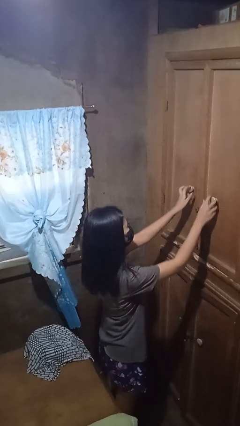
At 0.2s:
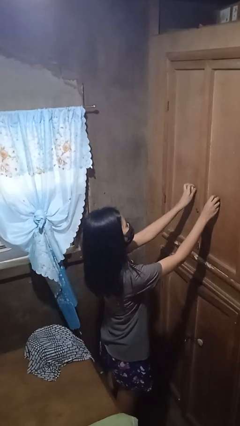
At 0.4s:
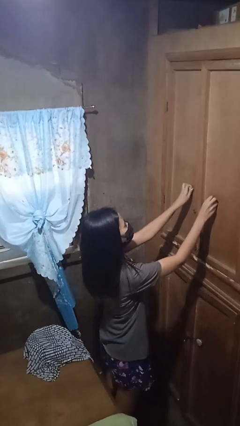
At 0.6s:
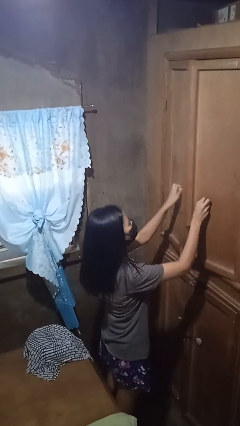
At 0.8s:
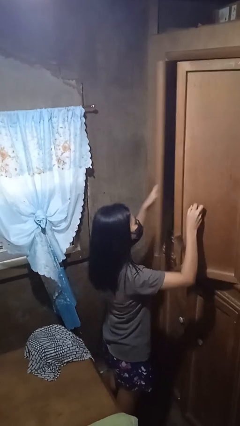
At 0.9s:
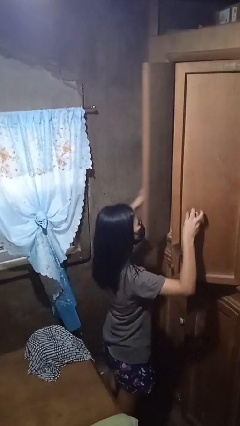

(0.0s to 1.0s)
person opens closet door

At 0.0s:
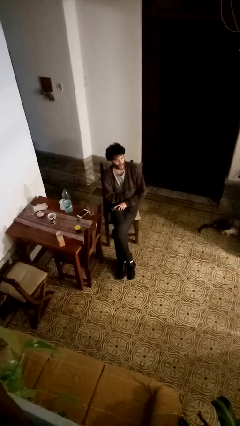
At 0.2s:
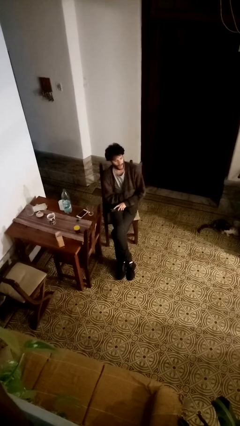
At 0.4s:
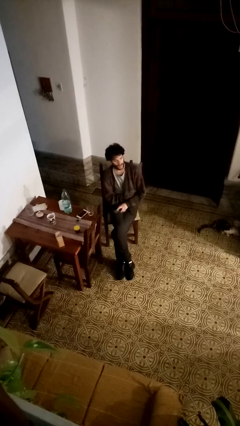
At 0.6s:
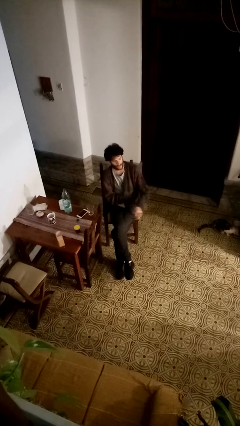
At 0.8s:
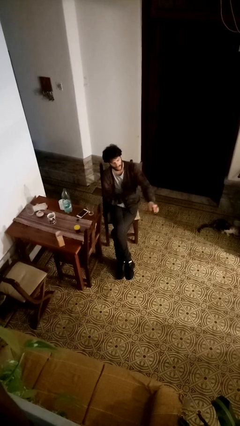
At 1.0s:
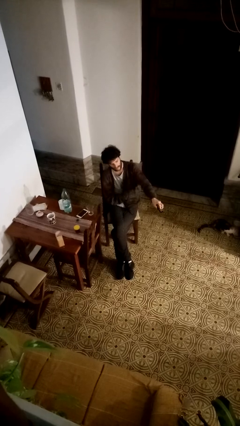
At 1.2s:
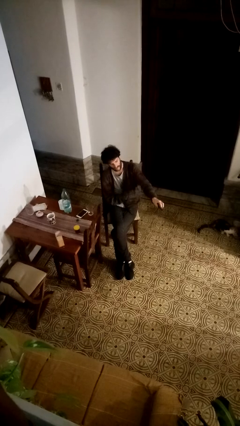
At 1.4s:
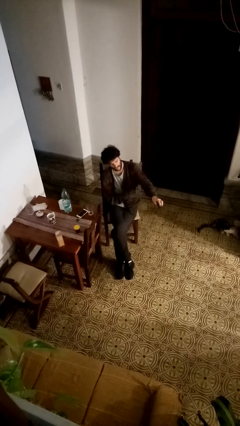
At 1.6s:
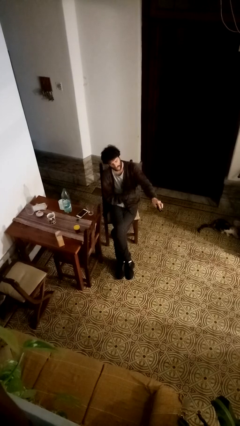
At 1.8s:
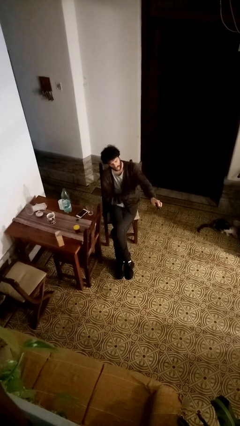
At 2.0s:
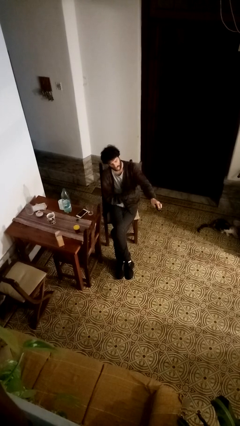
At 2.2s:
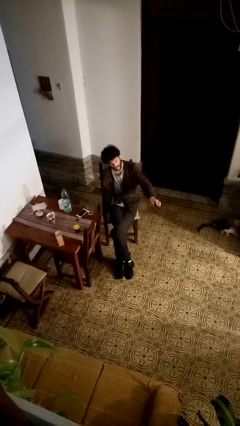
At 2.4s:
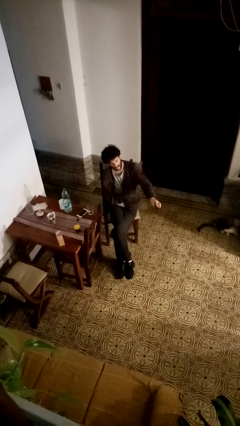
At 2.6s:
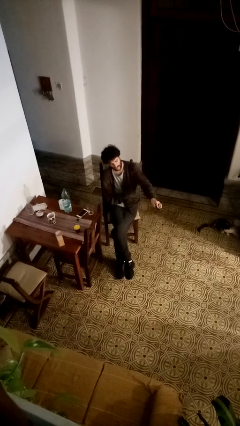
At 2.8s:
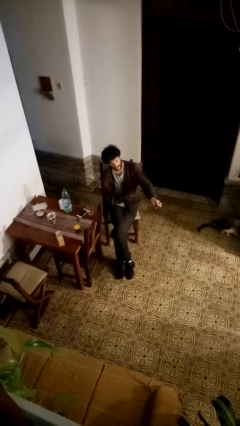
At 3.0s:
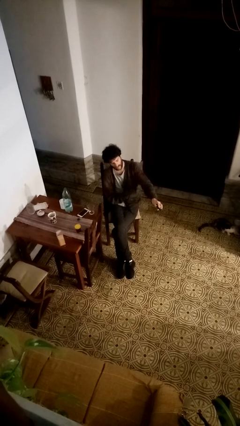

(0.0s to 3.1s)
person uses television remote

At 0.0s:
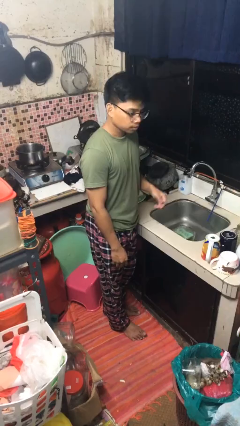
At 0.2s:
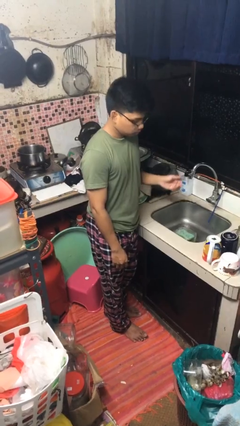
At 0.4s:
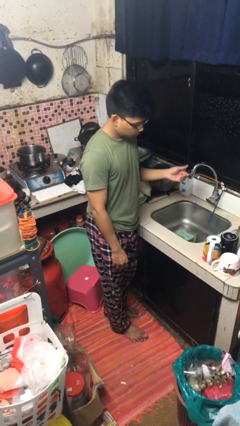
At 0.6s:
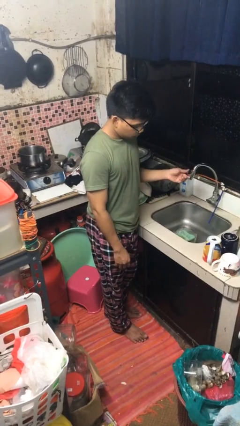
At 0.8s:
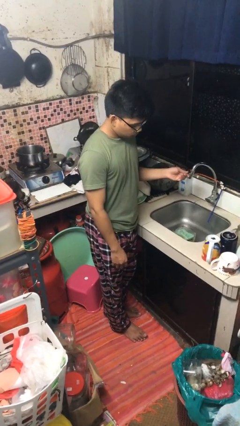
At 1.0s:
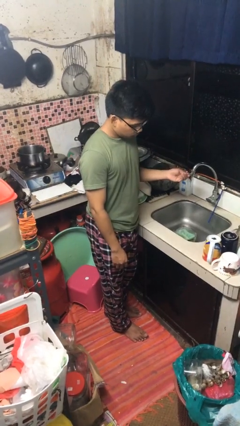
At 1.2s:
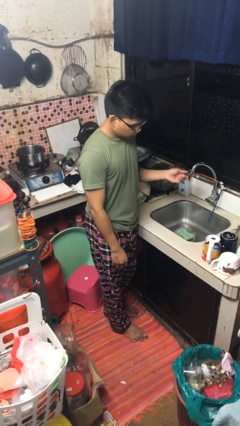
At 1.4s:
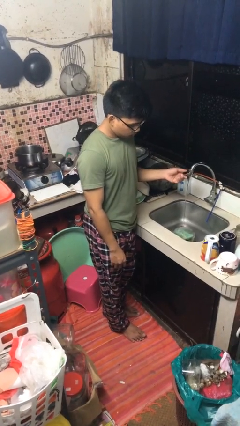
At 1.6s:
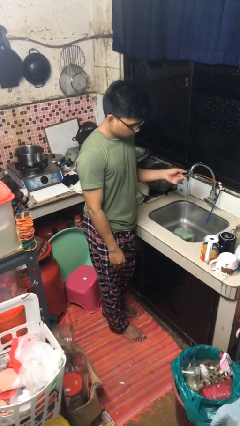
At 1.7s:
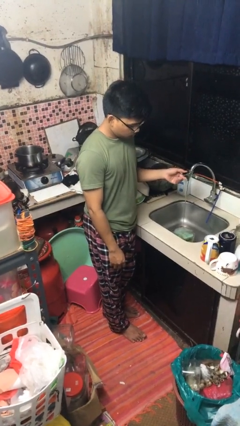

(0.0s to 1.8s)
person turns on faucet

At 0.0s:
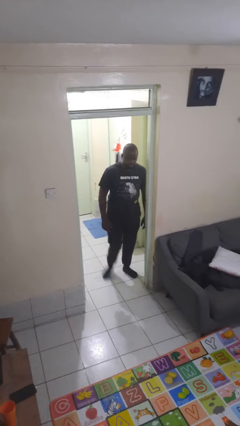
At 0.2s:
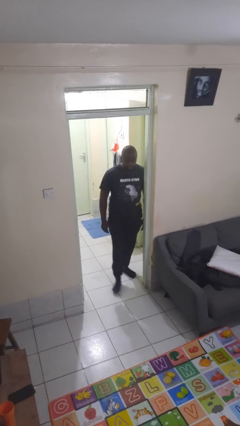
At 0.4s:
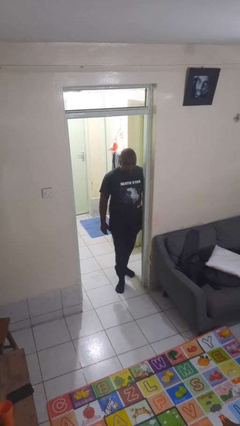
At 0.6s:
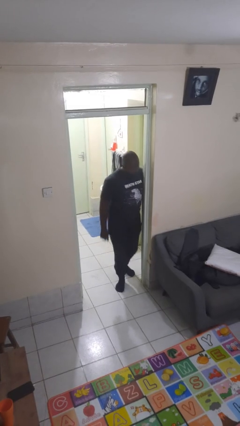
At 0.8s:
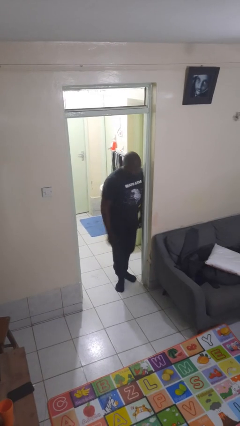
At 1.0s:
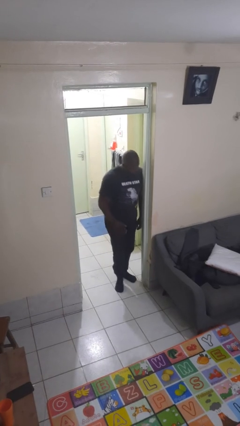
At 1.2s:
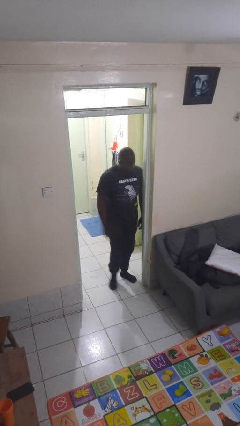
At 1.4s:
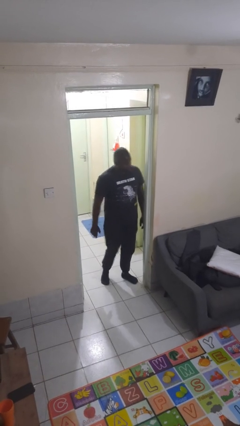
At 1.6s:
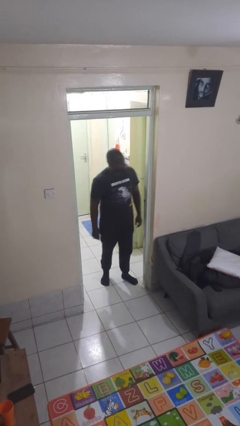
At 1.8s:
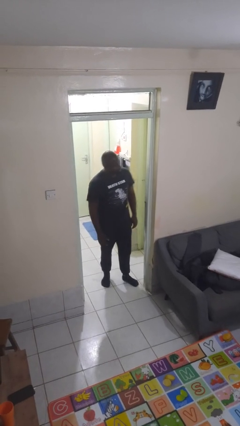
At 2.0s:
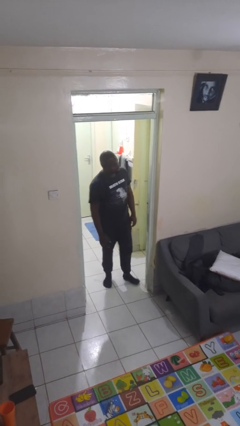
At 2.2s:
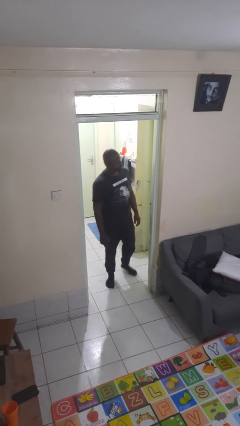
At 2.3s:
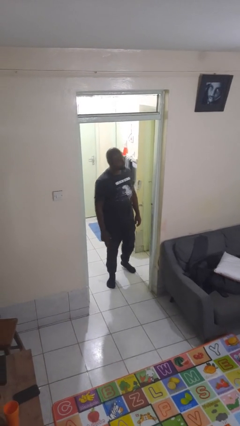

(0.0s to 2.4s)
person bumps into wall

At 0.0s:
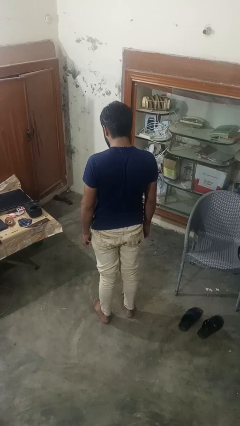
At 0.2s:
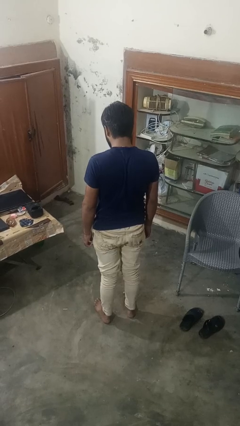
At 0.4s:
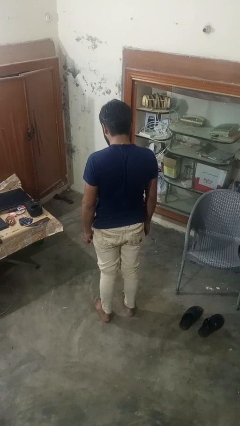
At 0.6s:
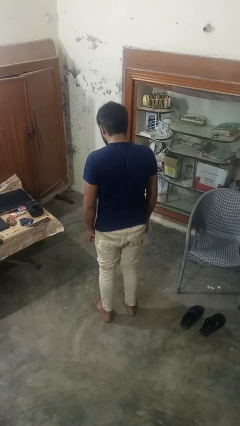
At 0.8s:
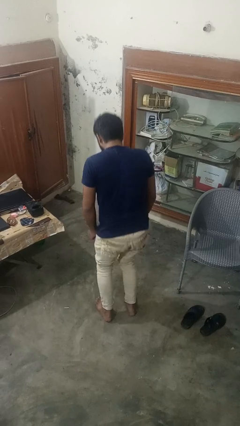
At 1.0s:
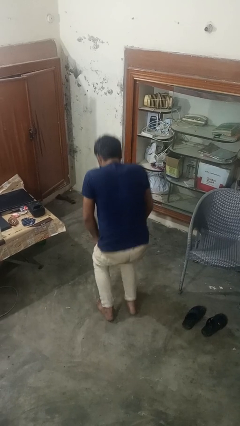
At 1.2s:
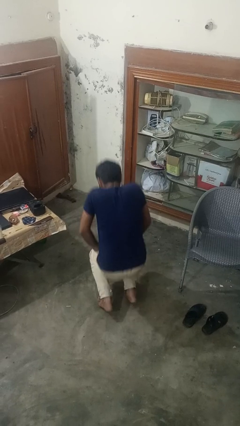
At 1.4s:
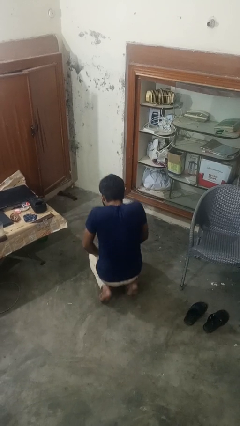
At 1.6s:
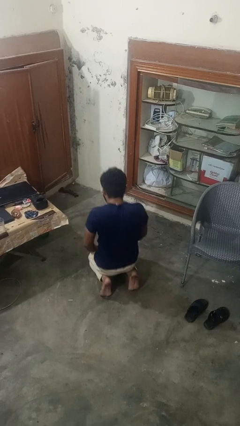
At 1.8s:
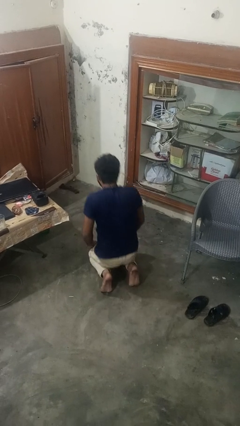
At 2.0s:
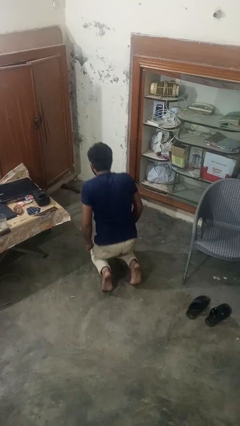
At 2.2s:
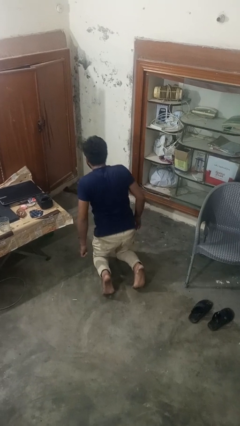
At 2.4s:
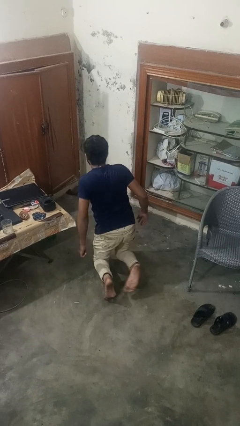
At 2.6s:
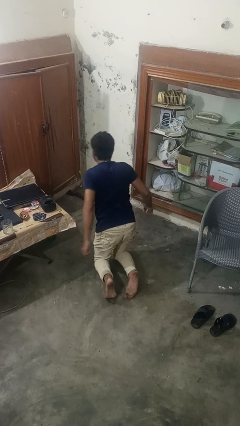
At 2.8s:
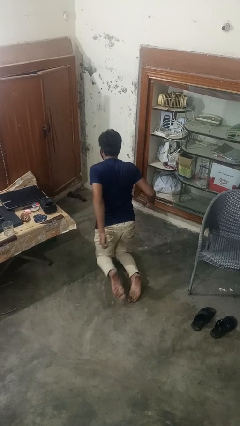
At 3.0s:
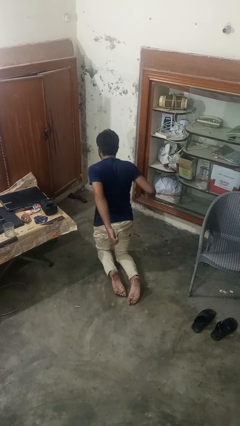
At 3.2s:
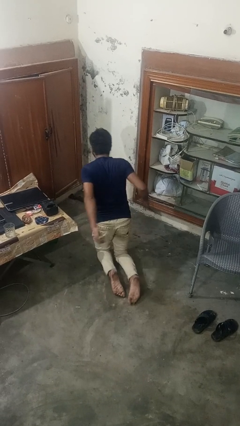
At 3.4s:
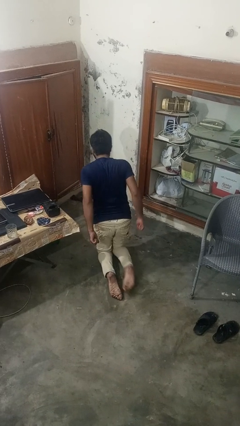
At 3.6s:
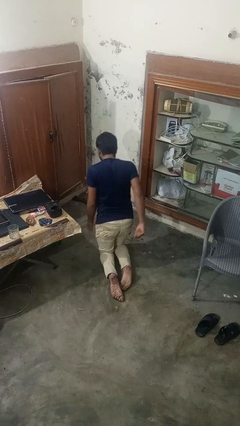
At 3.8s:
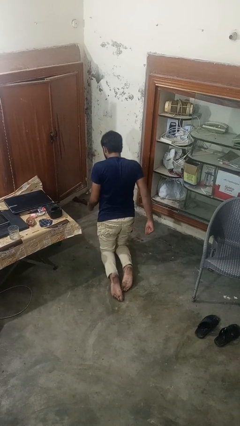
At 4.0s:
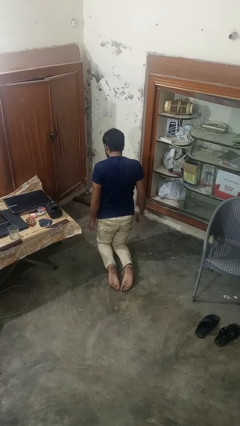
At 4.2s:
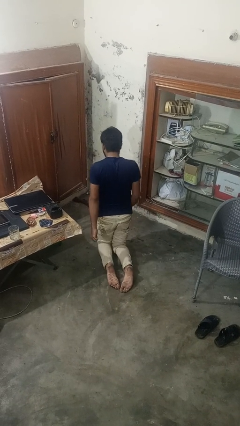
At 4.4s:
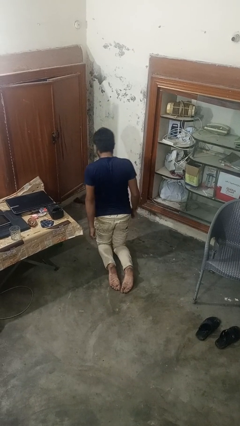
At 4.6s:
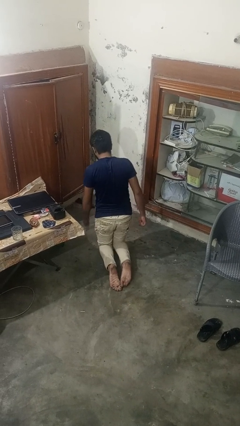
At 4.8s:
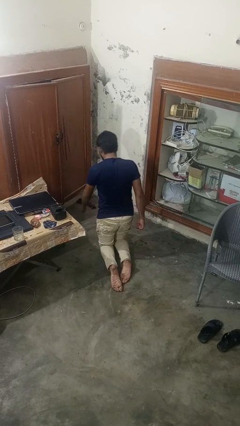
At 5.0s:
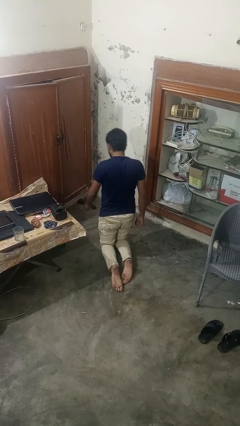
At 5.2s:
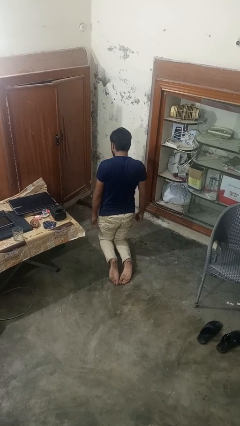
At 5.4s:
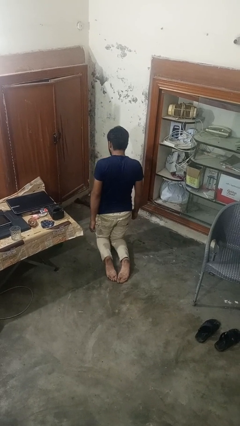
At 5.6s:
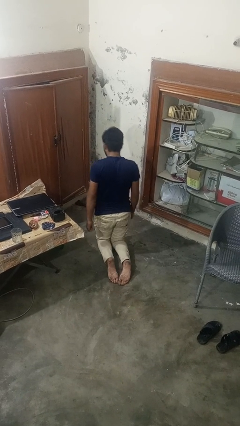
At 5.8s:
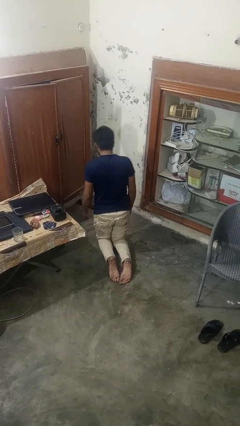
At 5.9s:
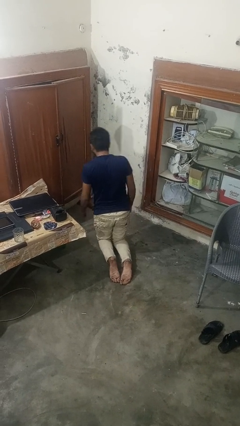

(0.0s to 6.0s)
person exercises with lunges

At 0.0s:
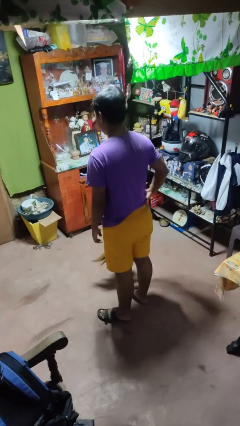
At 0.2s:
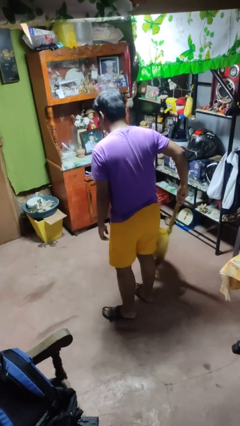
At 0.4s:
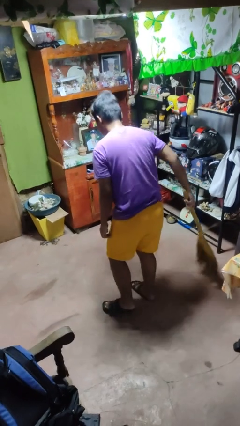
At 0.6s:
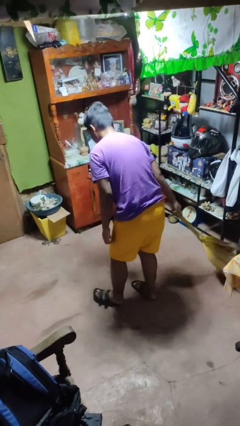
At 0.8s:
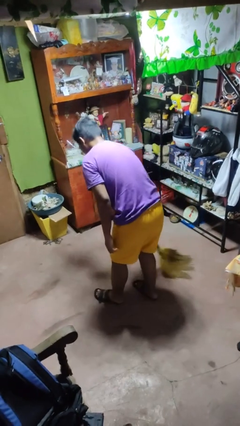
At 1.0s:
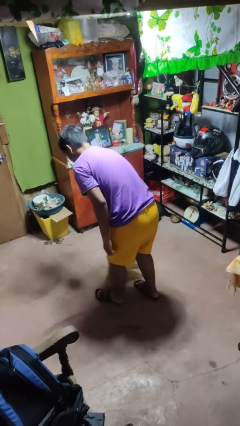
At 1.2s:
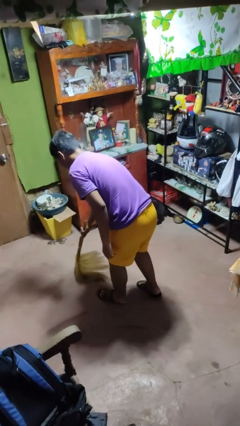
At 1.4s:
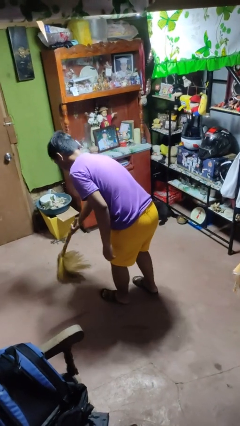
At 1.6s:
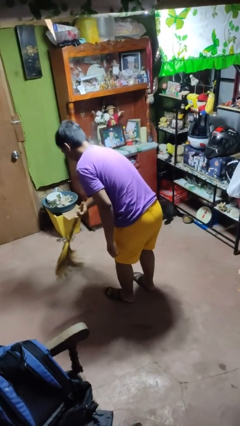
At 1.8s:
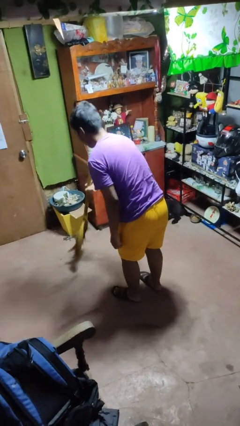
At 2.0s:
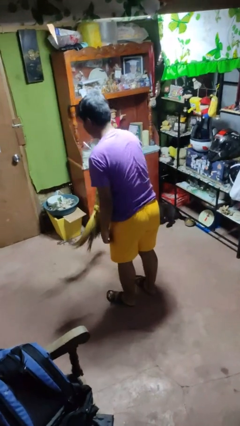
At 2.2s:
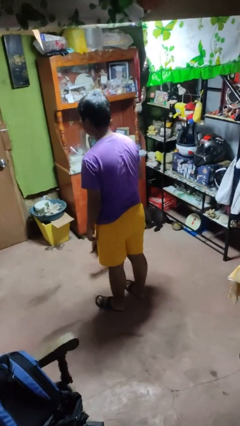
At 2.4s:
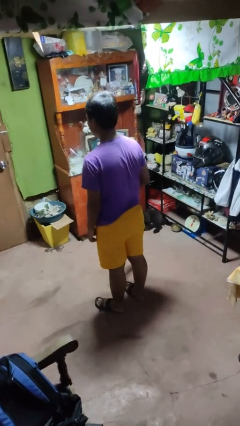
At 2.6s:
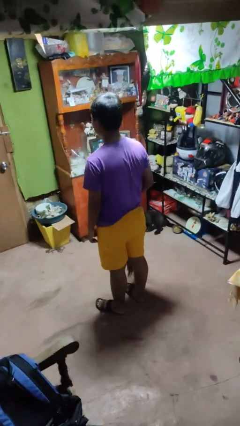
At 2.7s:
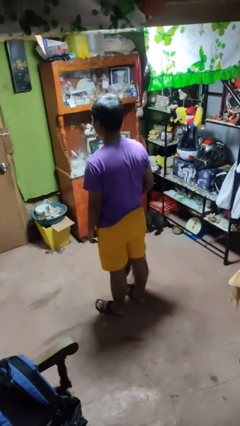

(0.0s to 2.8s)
person sweeps floor

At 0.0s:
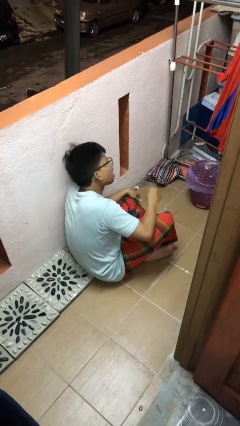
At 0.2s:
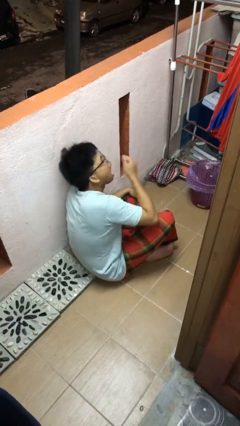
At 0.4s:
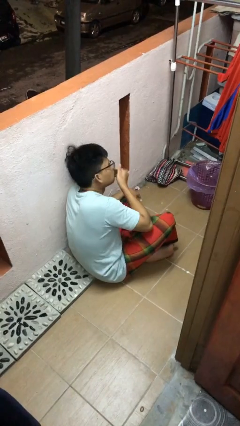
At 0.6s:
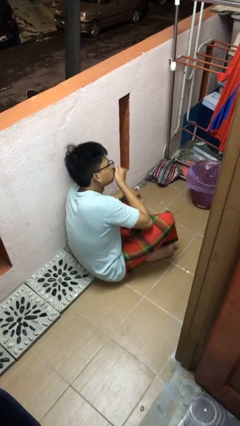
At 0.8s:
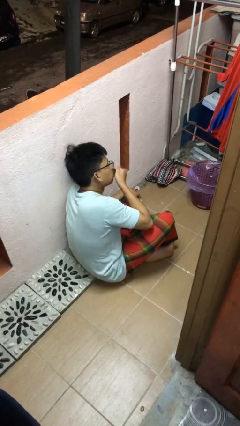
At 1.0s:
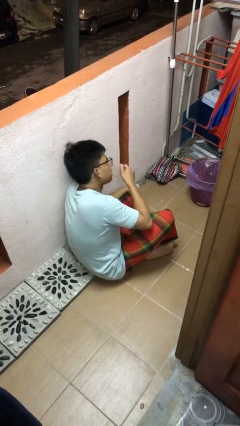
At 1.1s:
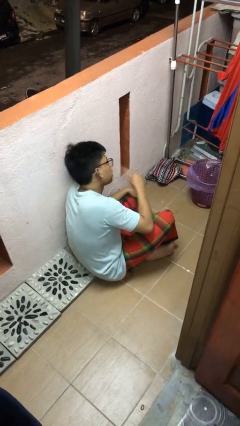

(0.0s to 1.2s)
person sneezes into hand
